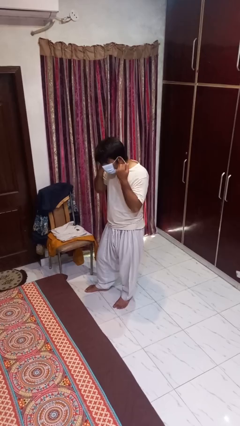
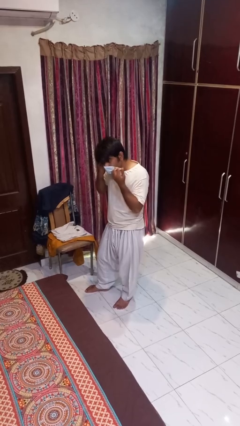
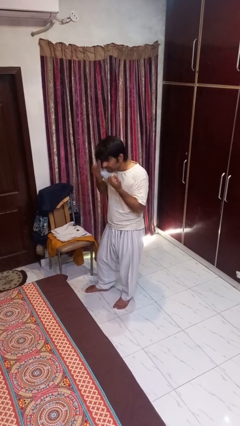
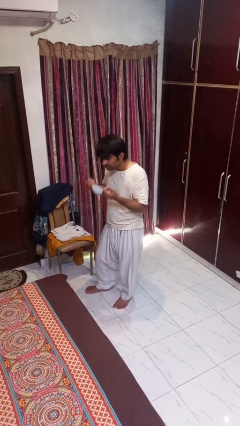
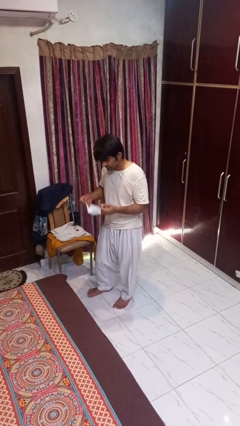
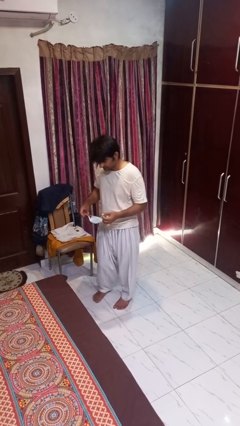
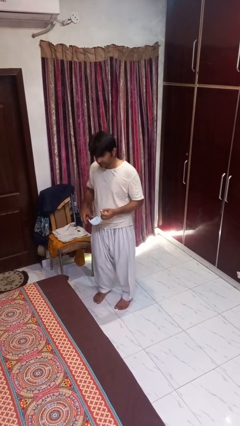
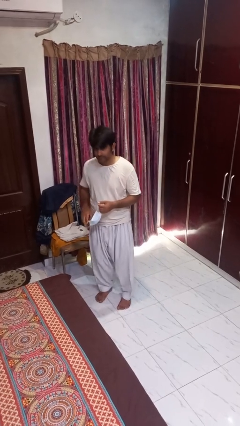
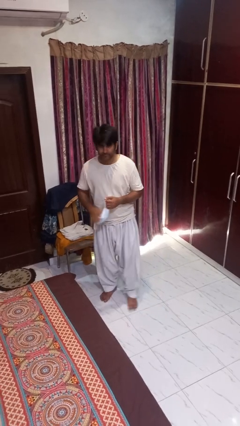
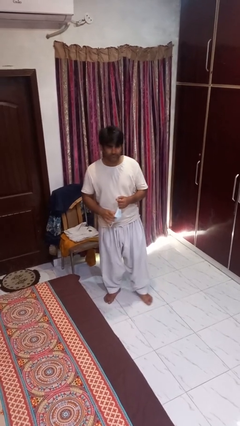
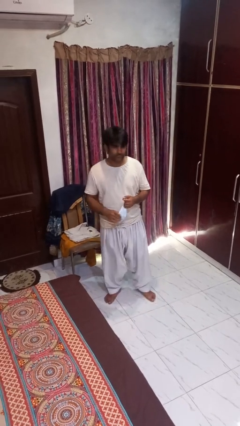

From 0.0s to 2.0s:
person takes off facemask

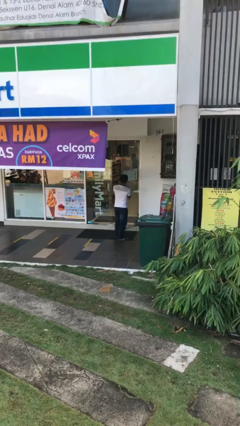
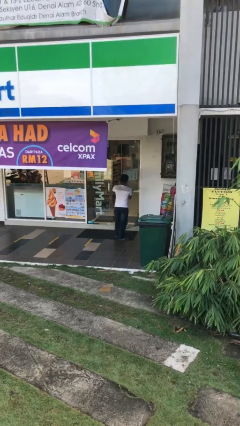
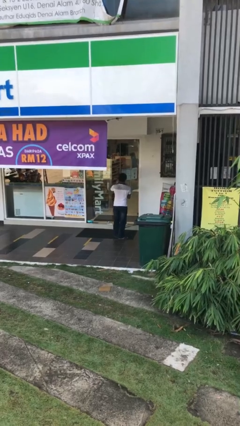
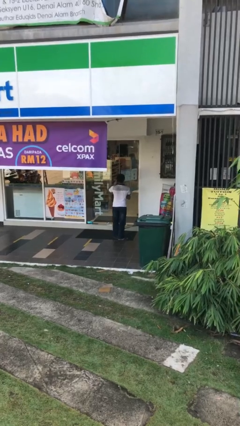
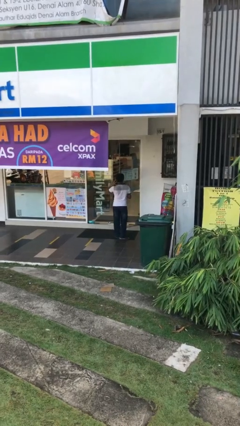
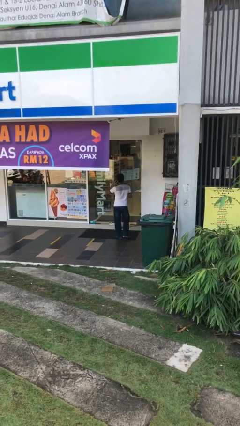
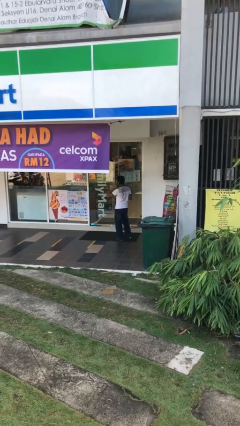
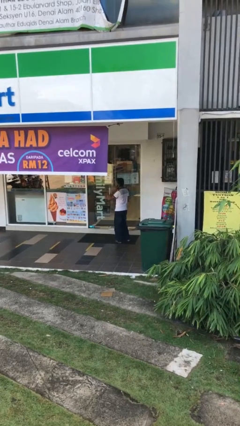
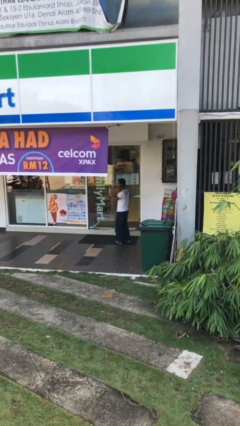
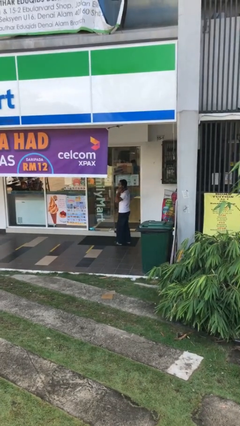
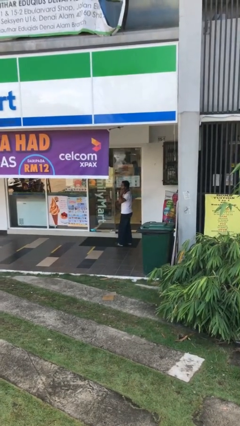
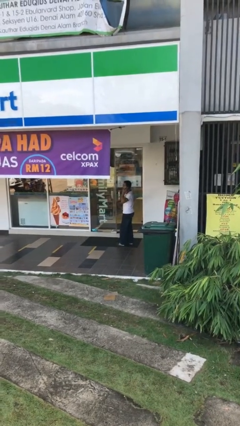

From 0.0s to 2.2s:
person closes facility door

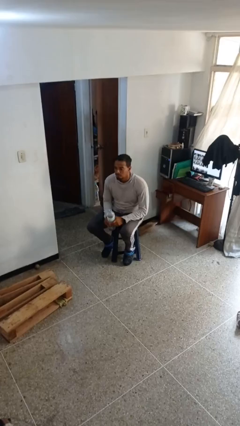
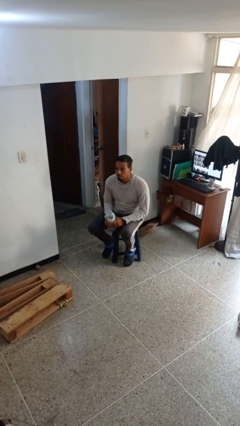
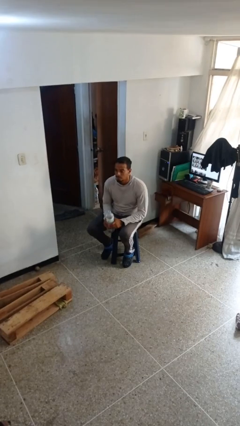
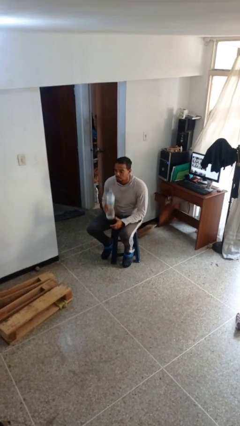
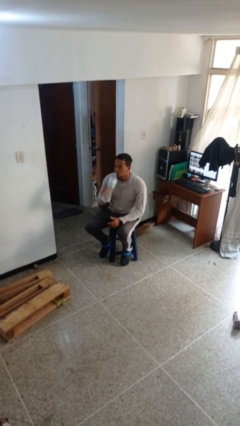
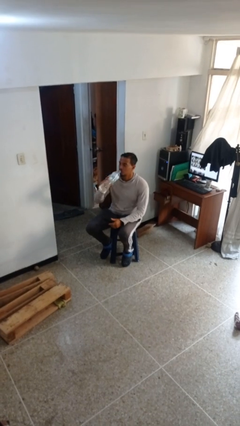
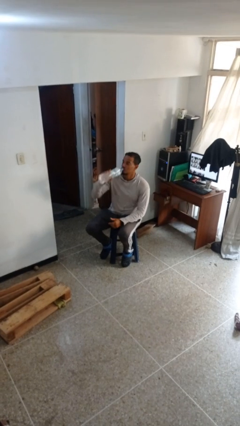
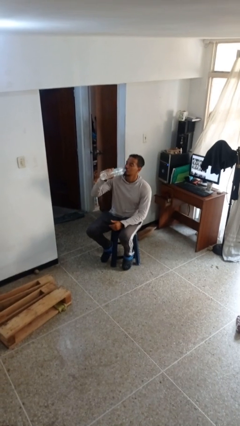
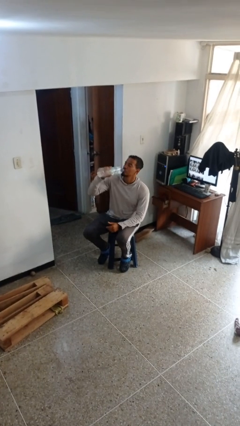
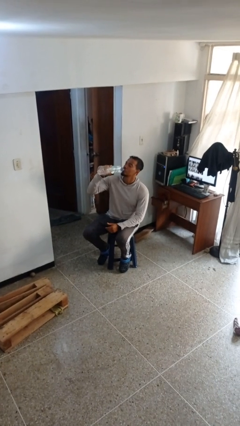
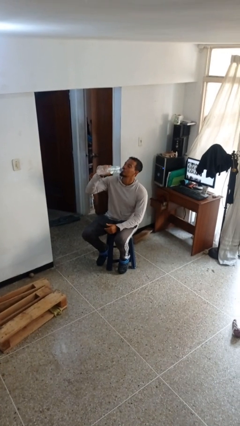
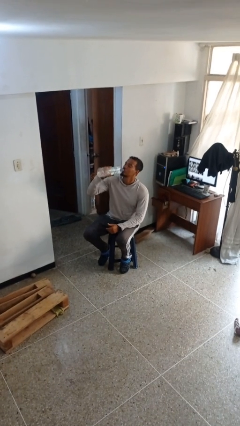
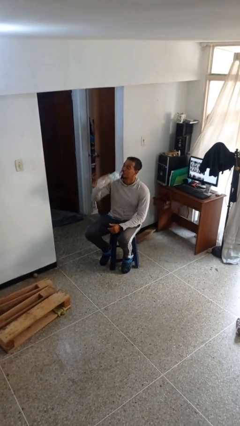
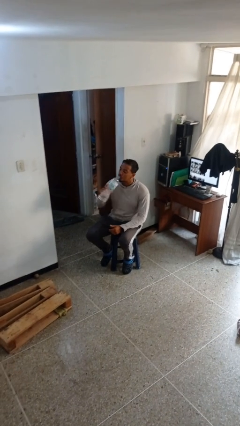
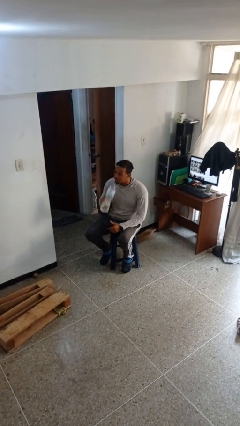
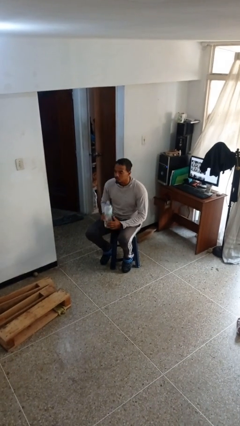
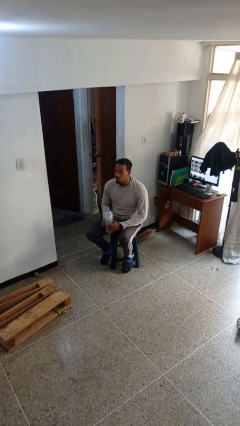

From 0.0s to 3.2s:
person drinks from bottle

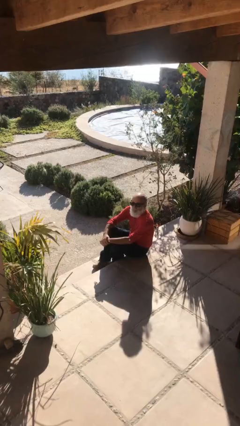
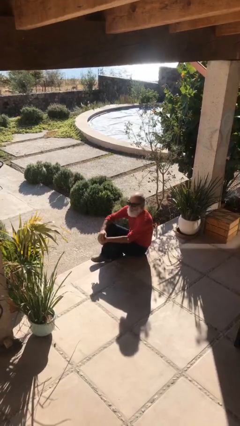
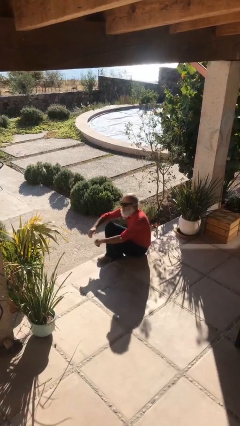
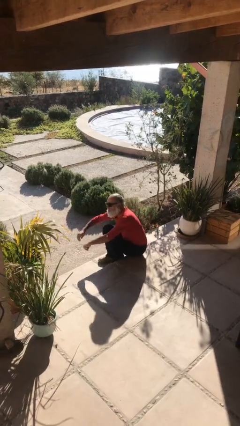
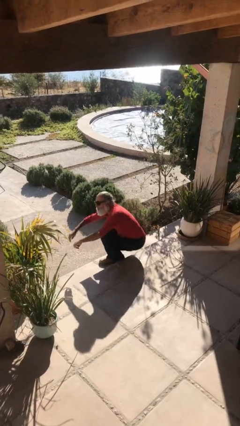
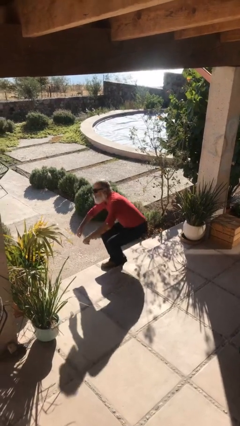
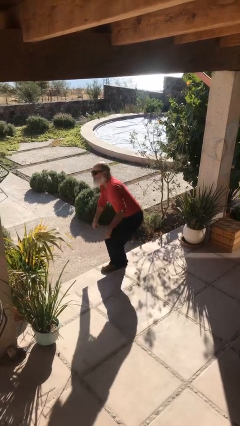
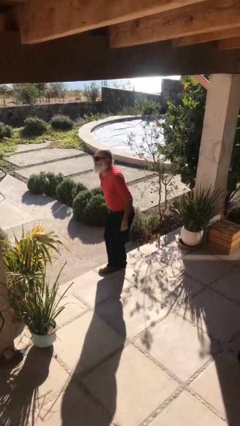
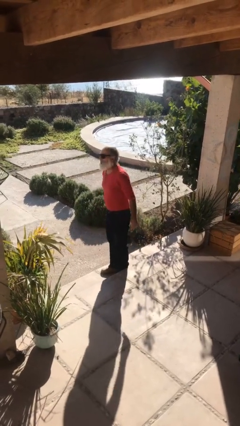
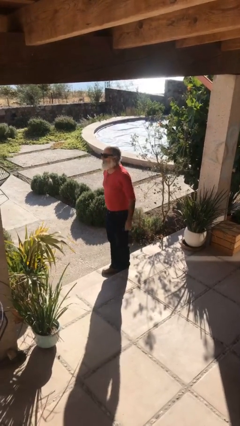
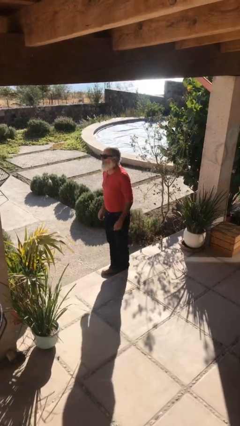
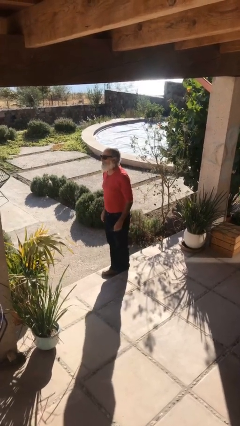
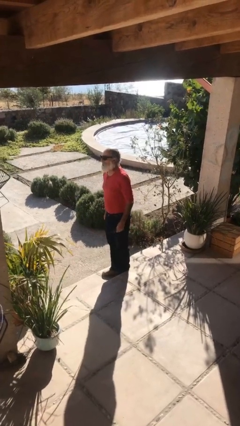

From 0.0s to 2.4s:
person stands up

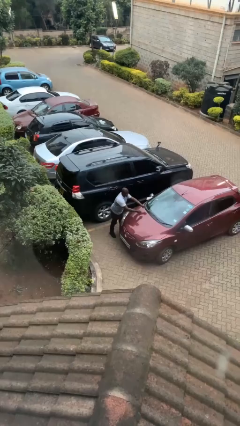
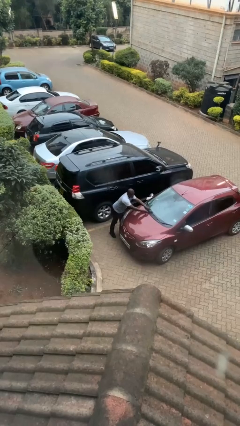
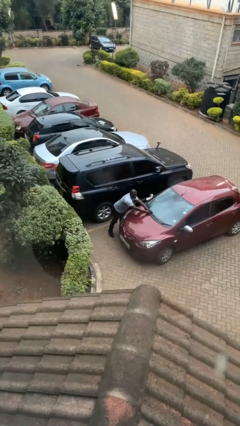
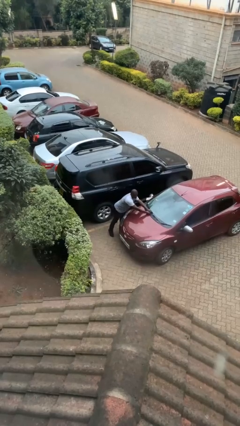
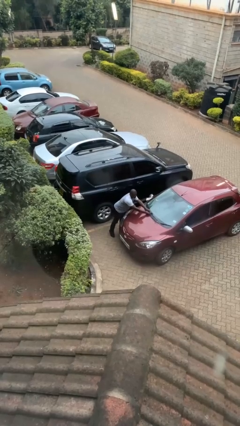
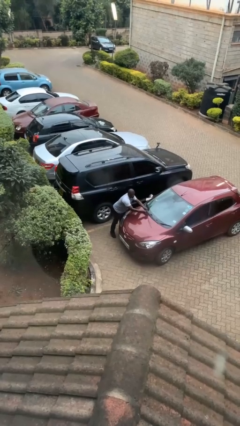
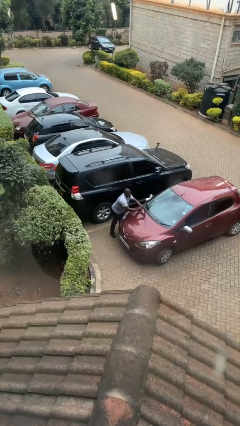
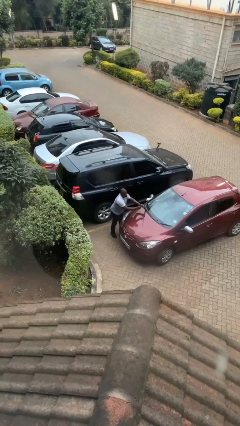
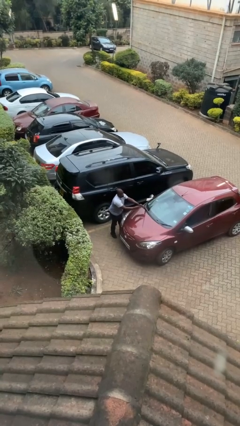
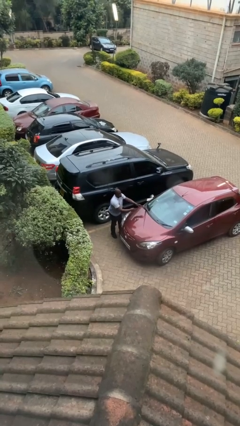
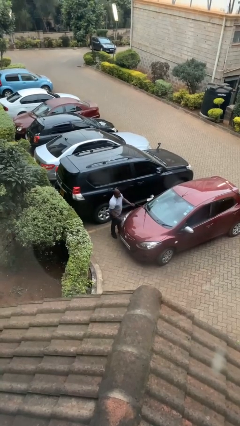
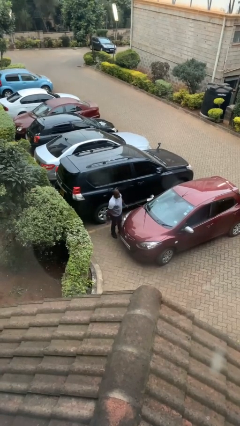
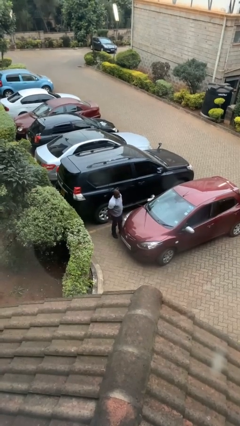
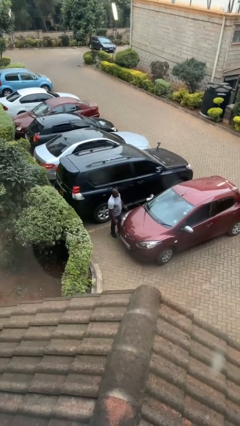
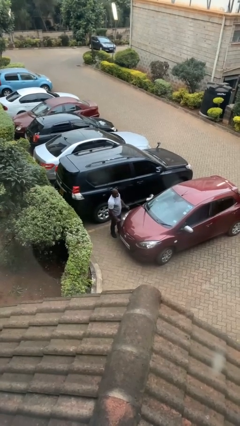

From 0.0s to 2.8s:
person flips up car wipers

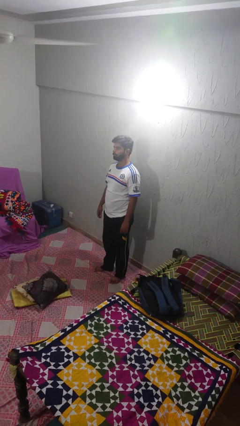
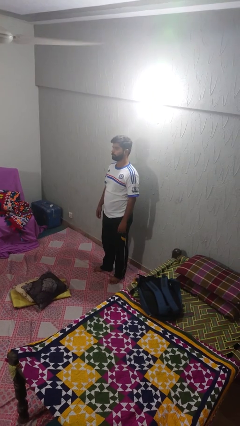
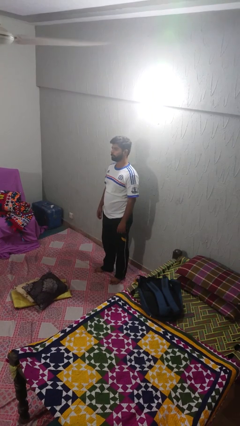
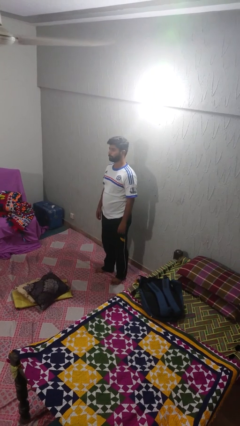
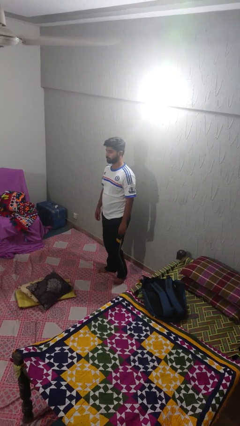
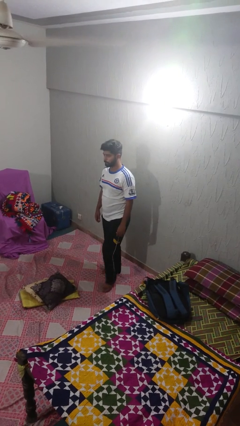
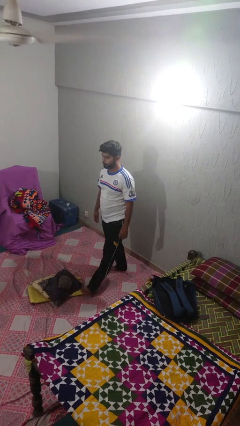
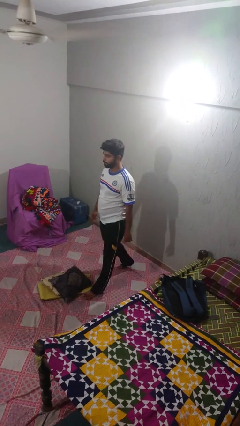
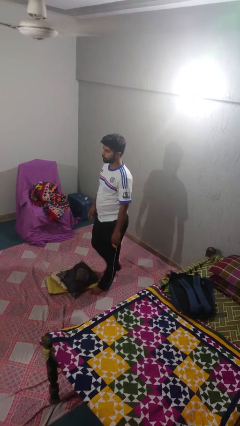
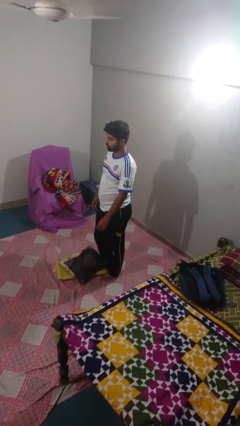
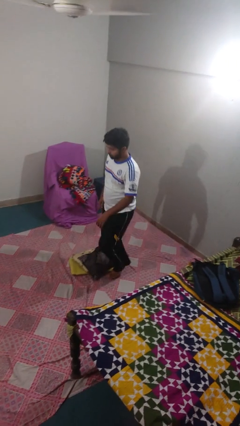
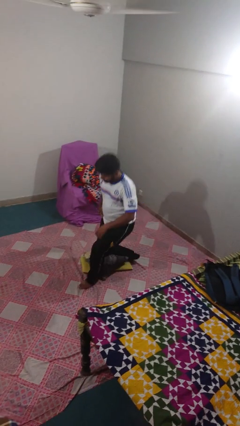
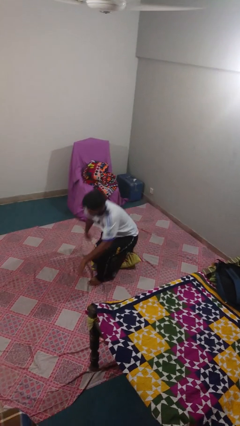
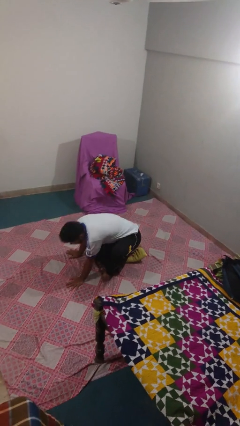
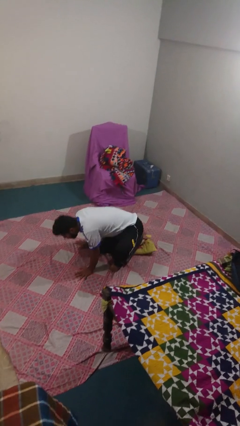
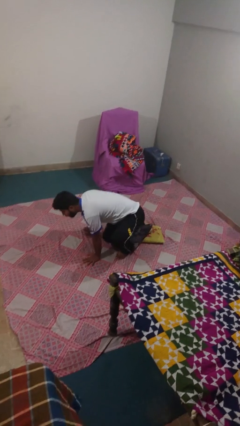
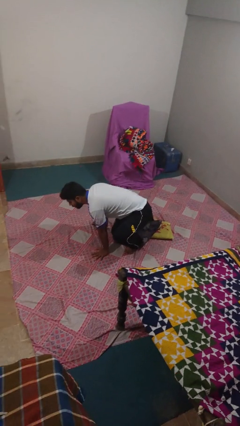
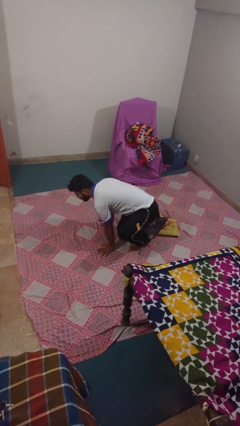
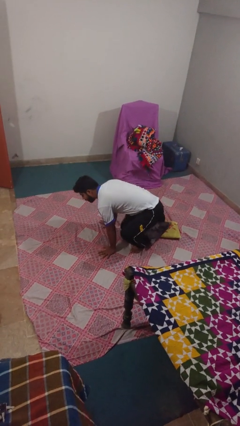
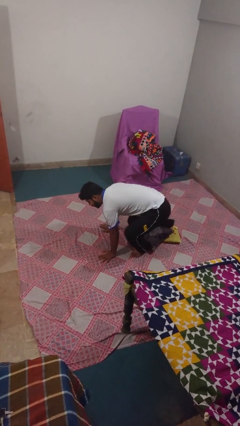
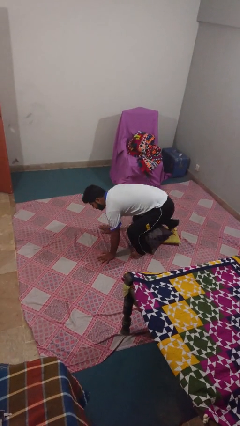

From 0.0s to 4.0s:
person trips on object on floor

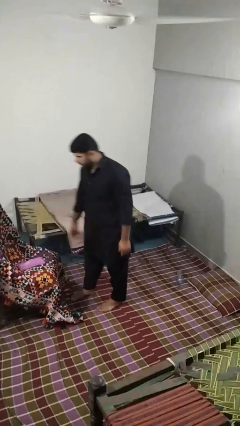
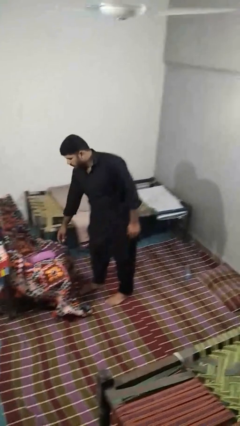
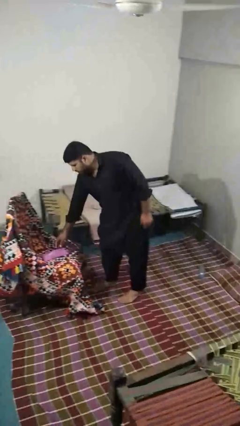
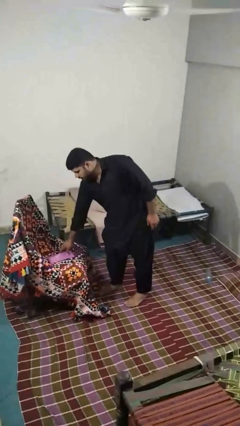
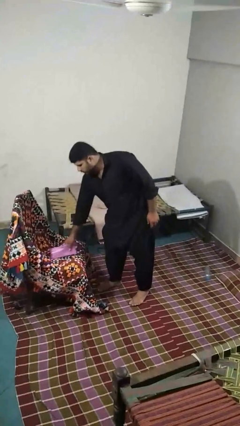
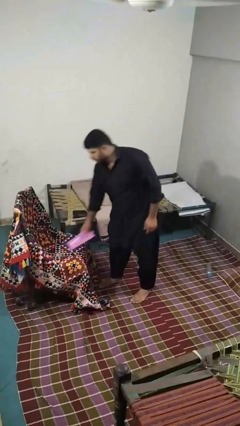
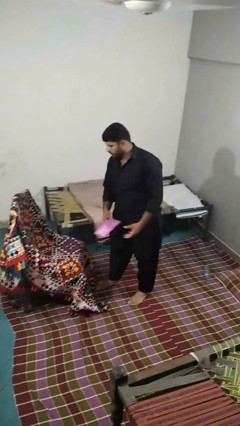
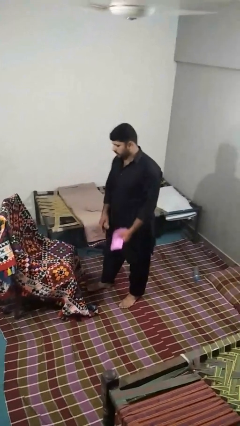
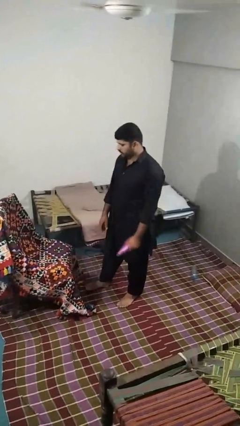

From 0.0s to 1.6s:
person picks up object from couch
